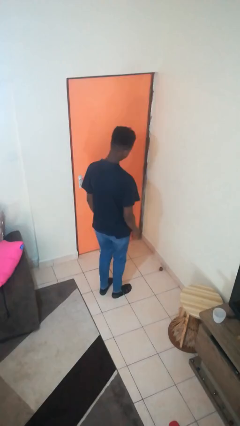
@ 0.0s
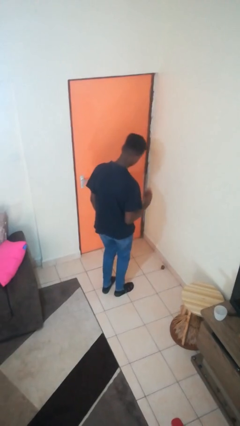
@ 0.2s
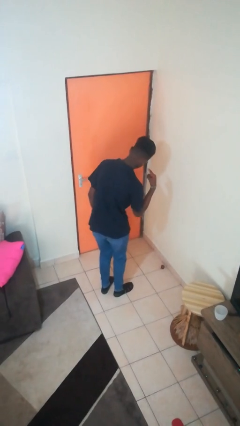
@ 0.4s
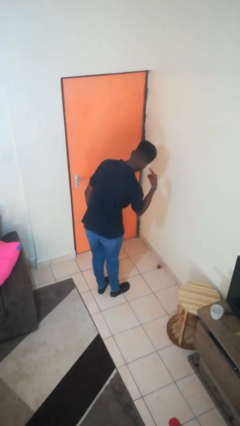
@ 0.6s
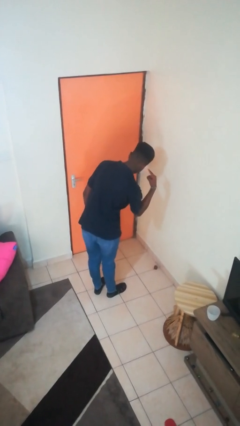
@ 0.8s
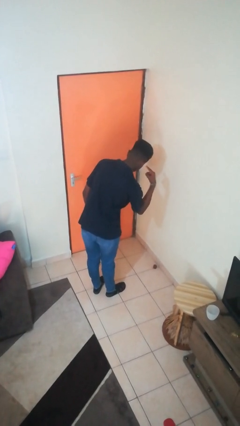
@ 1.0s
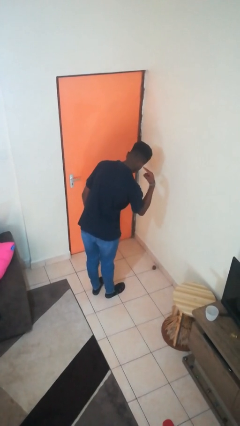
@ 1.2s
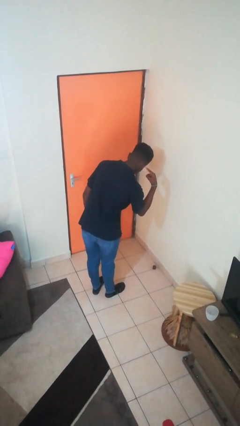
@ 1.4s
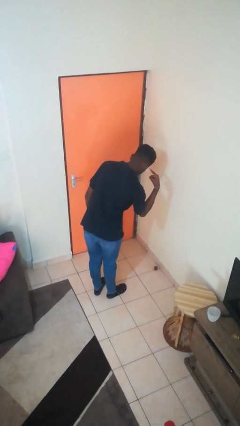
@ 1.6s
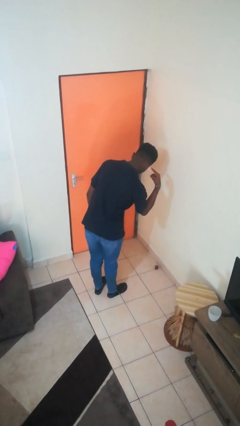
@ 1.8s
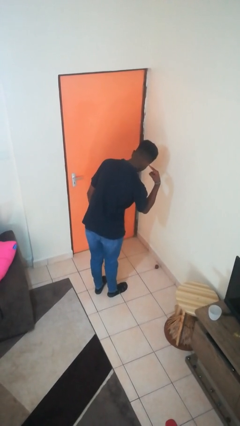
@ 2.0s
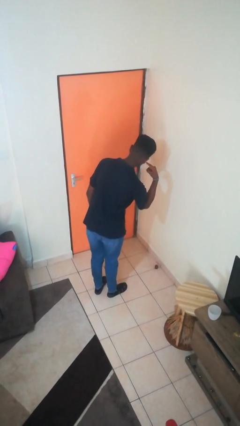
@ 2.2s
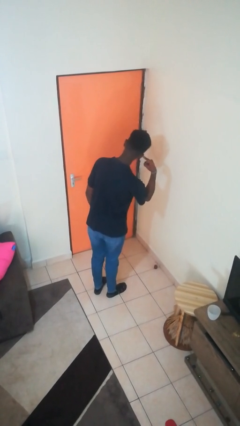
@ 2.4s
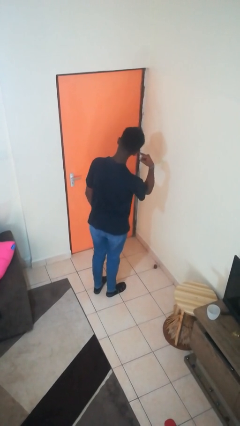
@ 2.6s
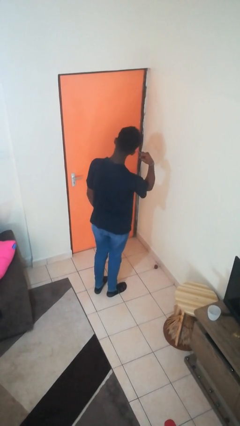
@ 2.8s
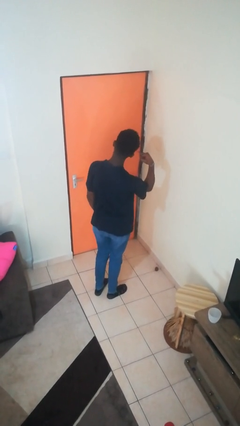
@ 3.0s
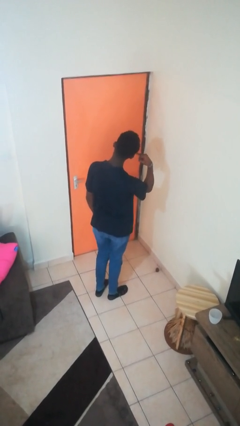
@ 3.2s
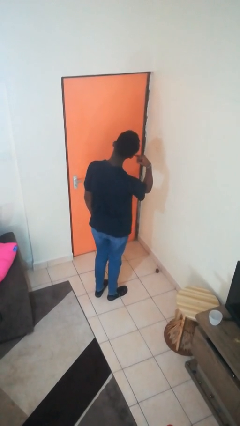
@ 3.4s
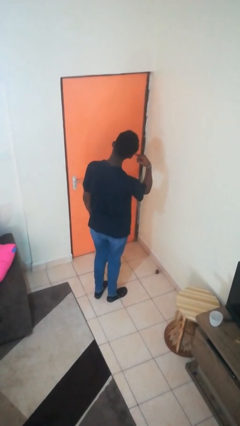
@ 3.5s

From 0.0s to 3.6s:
person gestures listen closely

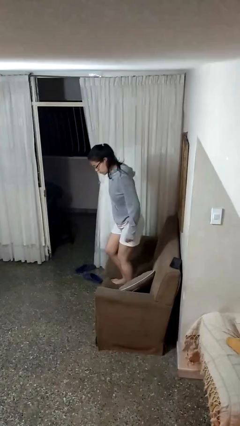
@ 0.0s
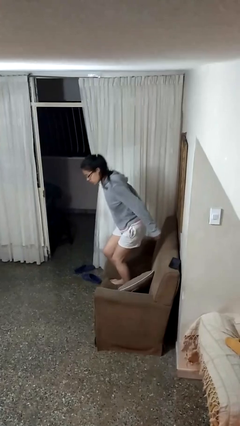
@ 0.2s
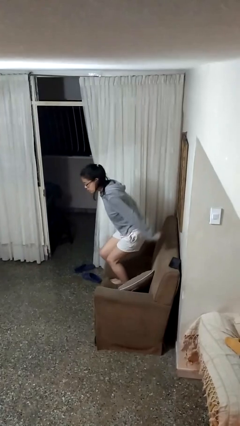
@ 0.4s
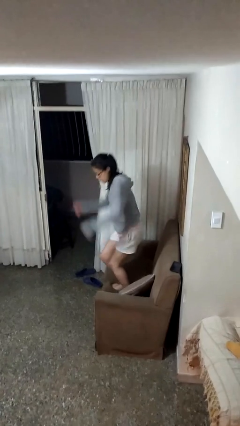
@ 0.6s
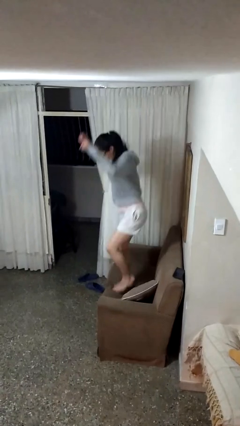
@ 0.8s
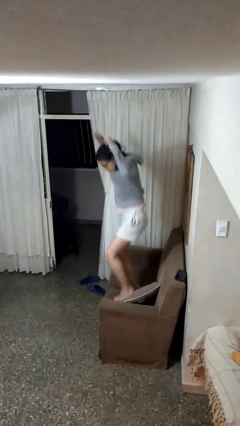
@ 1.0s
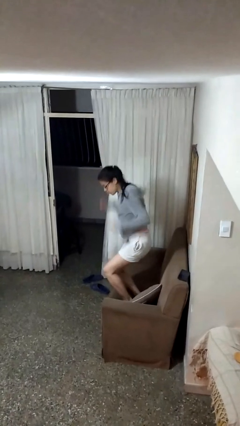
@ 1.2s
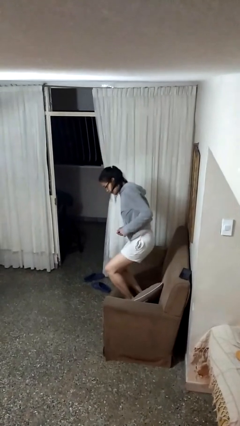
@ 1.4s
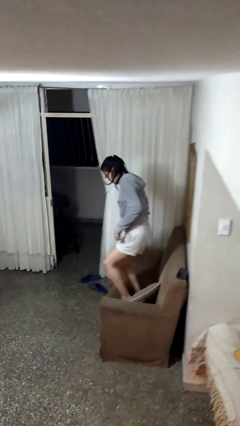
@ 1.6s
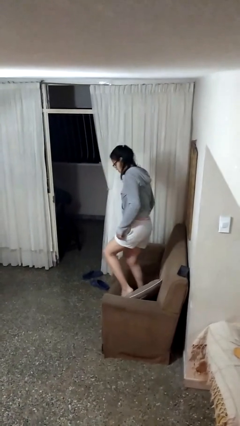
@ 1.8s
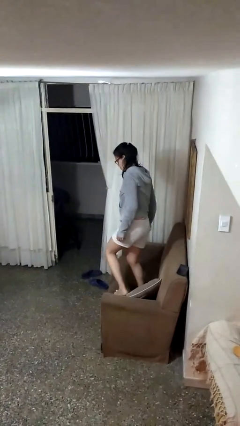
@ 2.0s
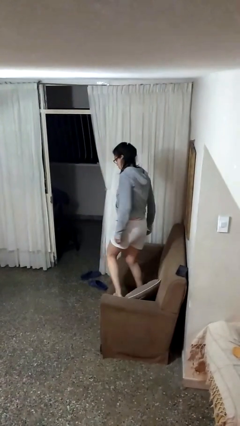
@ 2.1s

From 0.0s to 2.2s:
person jumps on couch

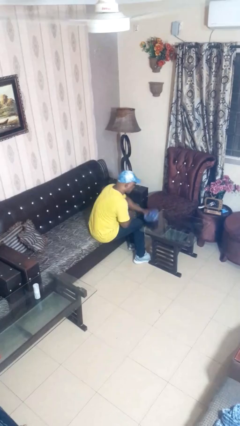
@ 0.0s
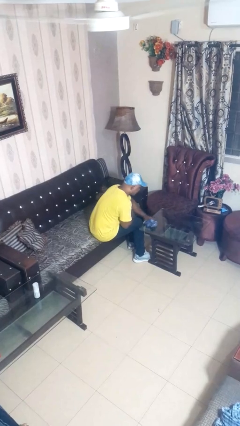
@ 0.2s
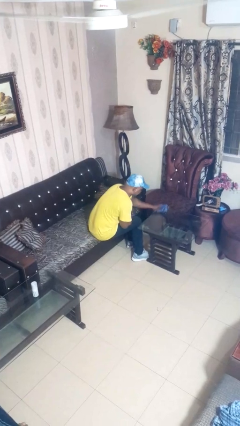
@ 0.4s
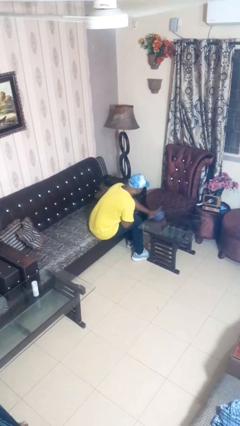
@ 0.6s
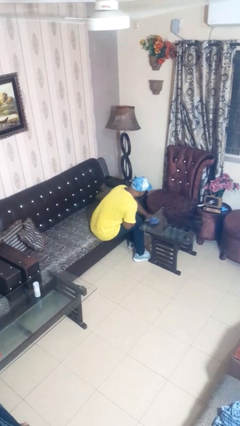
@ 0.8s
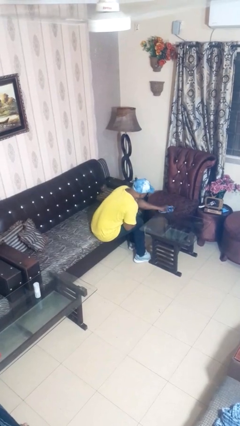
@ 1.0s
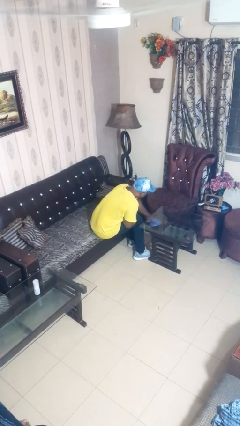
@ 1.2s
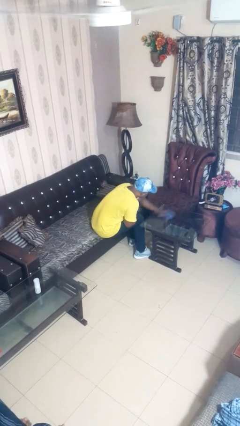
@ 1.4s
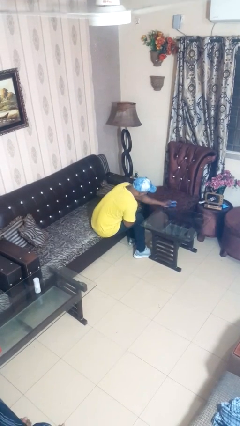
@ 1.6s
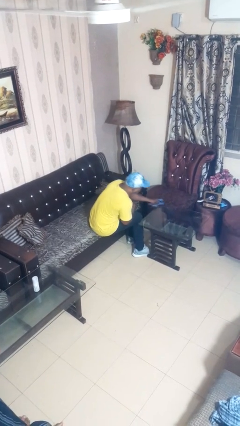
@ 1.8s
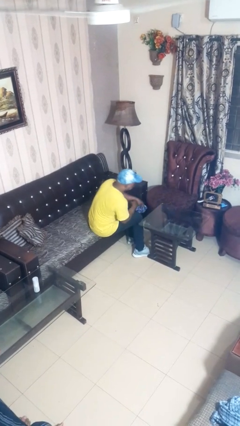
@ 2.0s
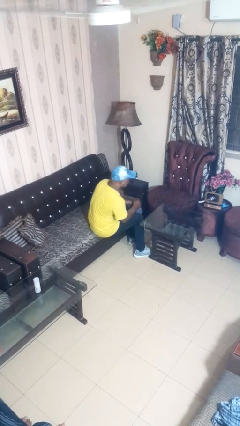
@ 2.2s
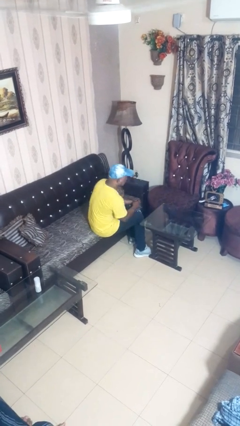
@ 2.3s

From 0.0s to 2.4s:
person cleans table with rag

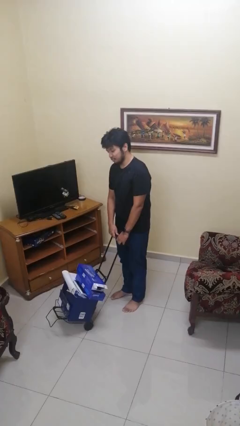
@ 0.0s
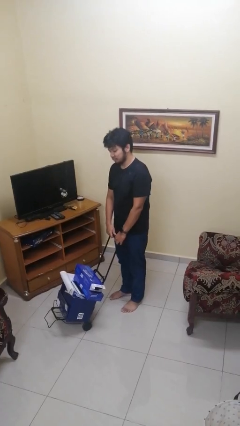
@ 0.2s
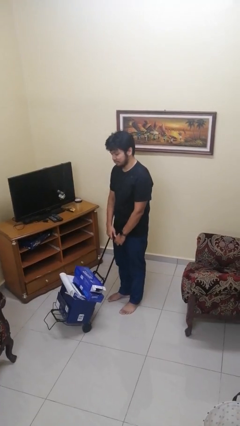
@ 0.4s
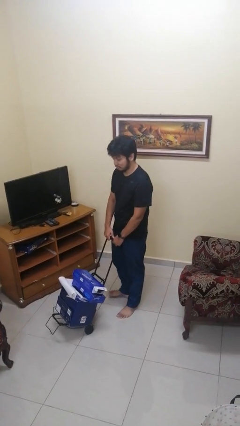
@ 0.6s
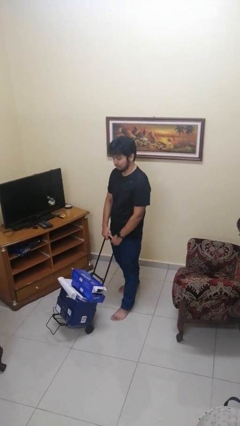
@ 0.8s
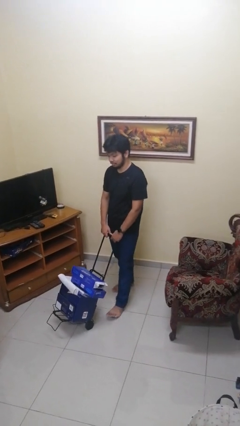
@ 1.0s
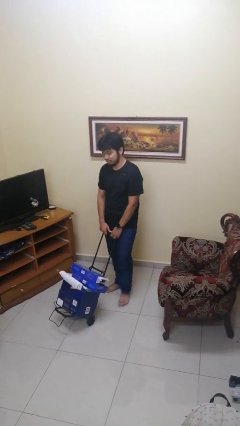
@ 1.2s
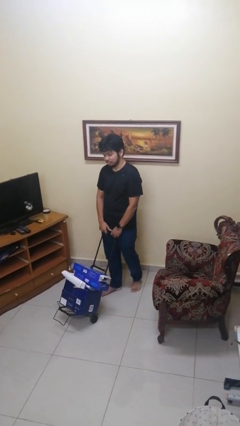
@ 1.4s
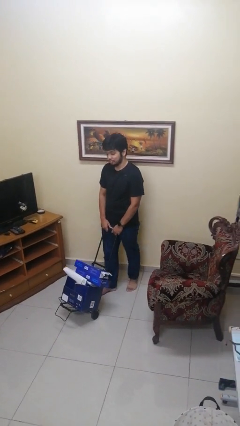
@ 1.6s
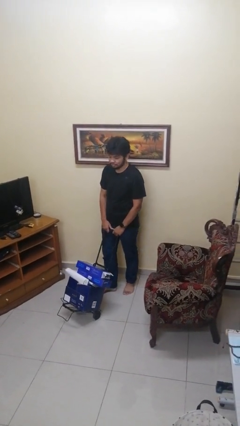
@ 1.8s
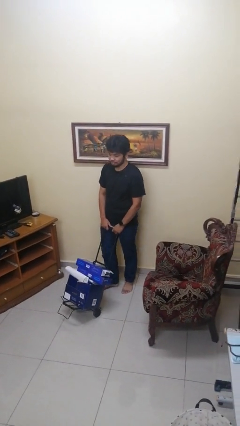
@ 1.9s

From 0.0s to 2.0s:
person pulls wheeled cart

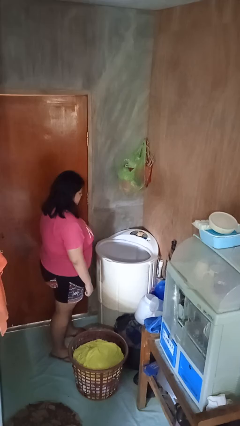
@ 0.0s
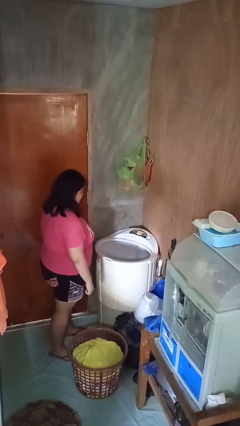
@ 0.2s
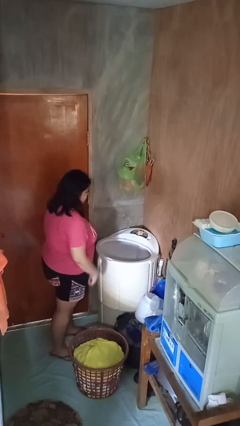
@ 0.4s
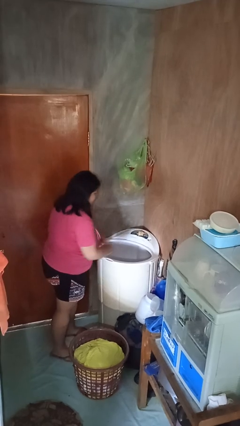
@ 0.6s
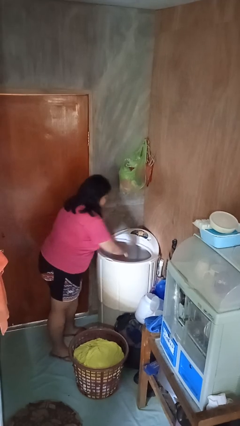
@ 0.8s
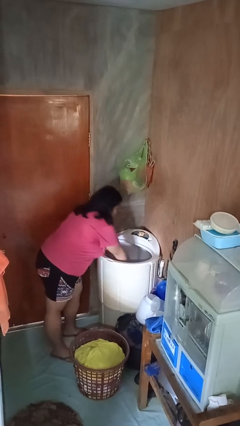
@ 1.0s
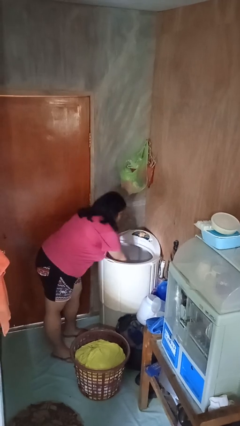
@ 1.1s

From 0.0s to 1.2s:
person unloads clotheswasher

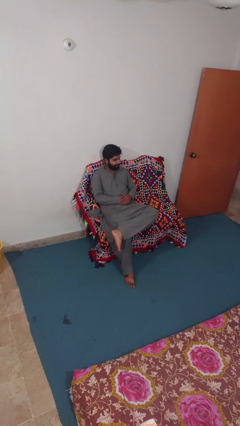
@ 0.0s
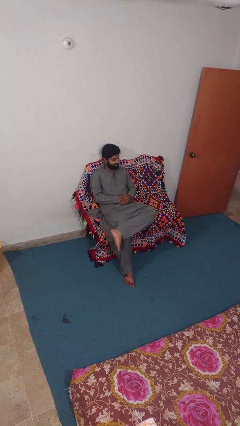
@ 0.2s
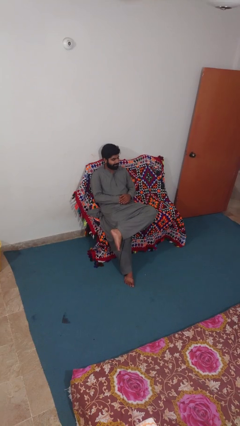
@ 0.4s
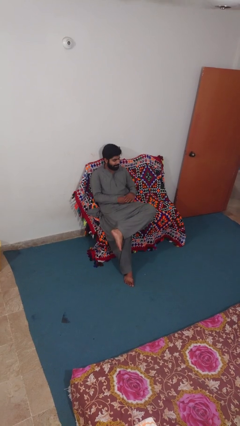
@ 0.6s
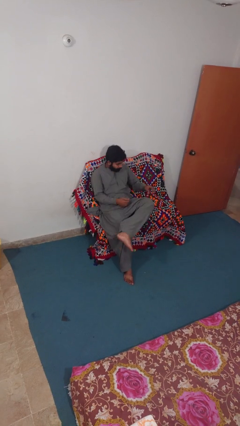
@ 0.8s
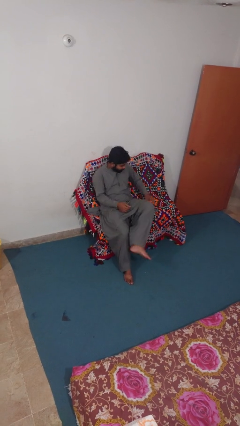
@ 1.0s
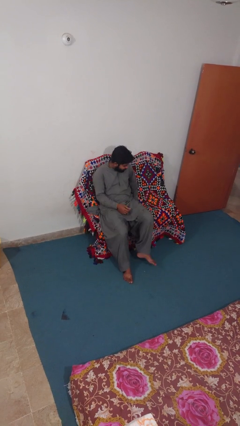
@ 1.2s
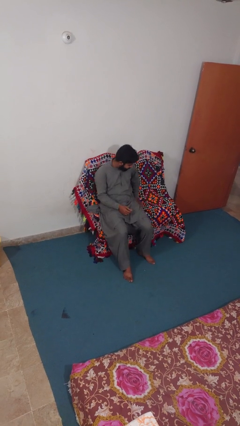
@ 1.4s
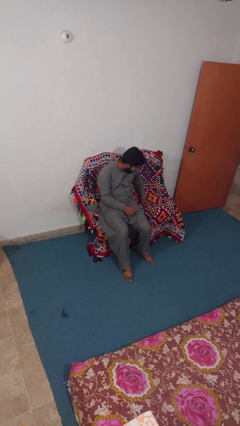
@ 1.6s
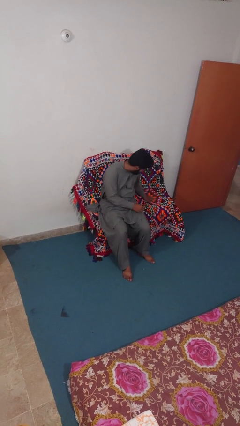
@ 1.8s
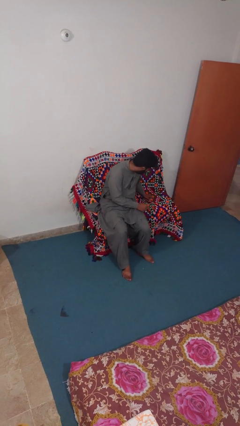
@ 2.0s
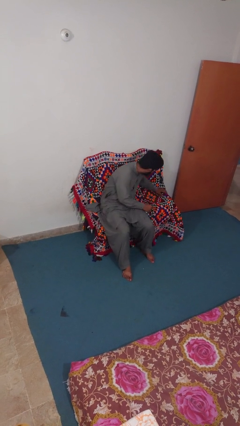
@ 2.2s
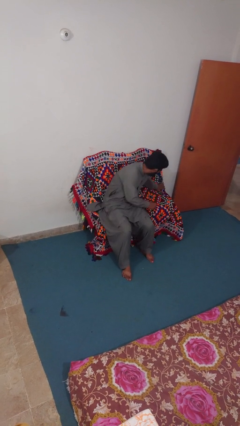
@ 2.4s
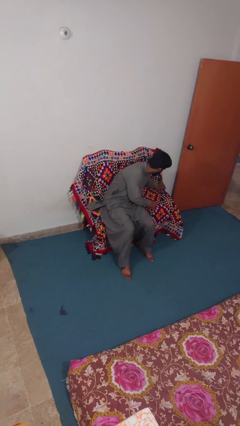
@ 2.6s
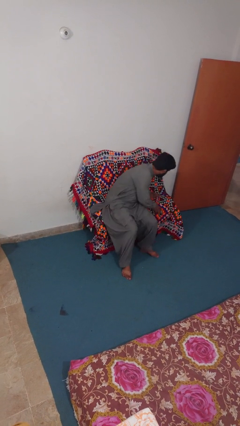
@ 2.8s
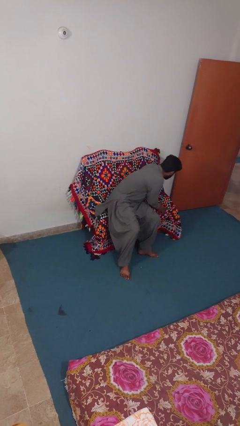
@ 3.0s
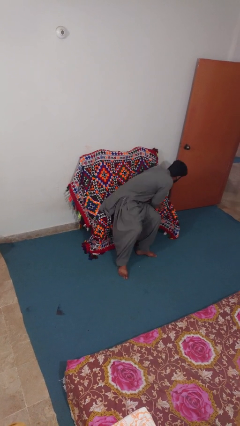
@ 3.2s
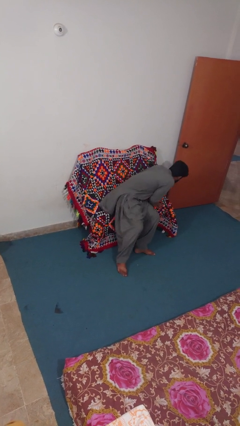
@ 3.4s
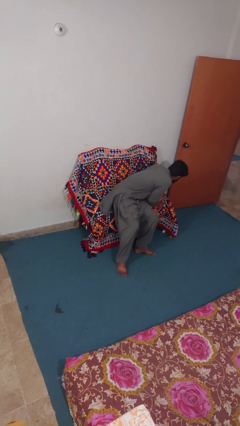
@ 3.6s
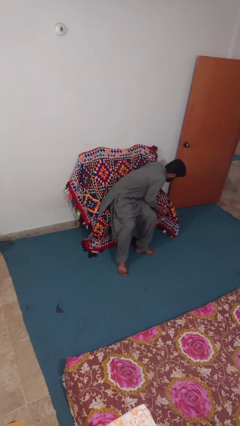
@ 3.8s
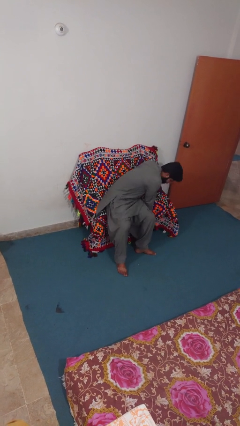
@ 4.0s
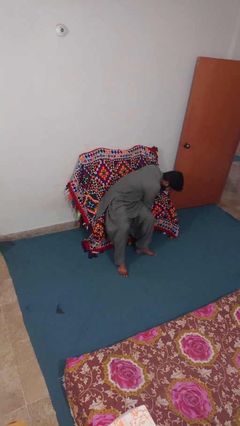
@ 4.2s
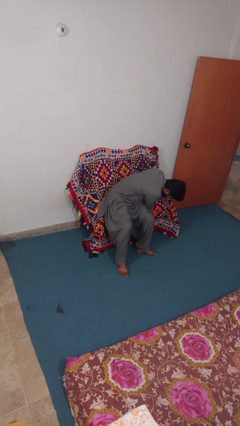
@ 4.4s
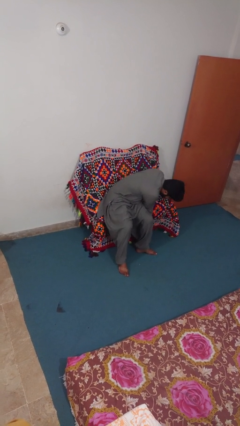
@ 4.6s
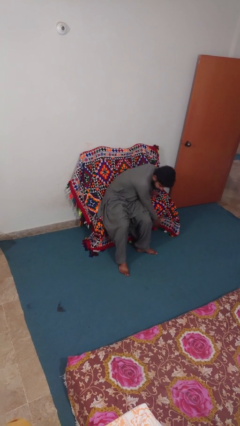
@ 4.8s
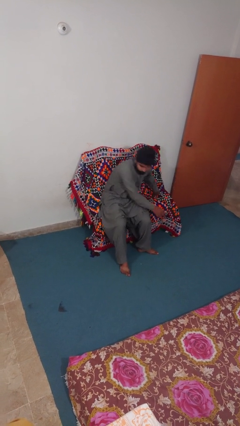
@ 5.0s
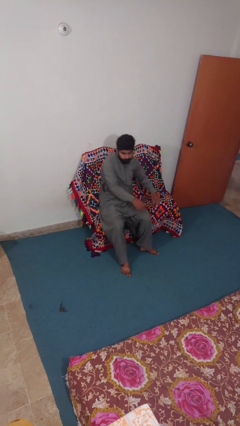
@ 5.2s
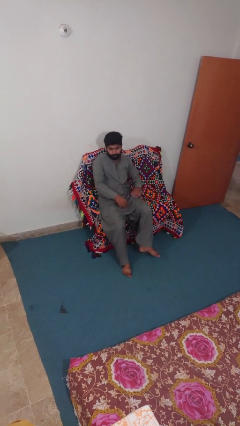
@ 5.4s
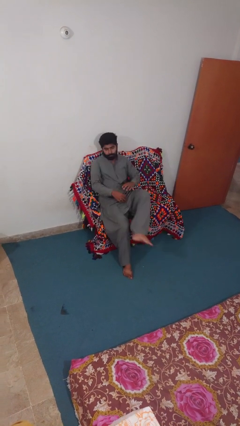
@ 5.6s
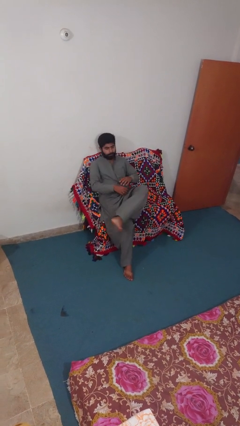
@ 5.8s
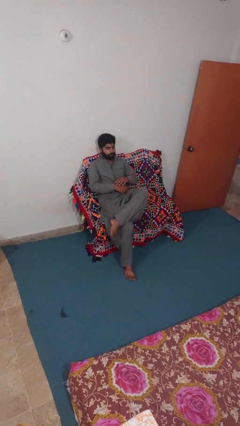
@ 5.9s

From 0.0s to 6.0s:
person searches in couch
